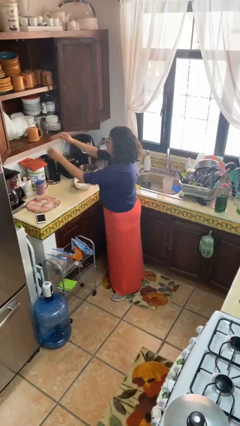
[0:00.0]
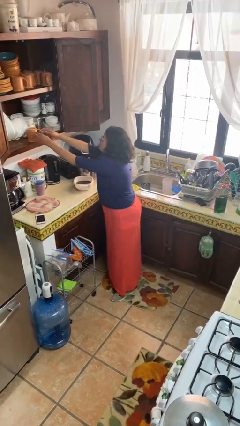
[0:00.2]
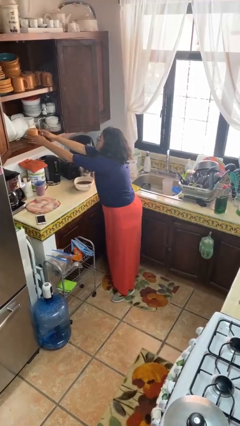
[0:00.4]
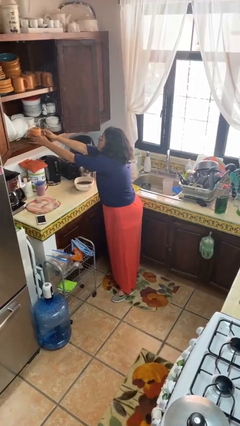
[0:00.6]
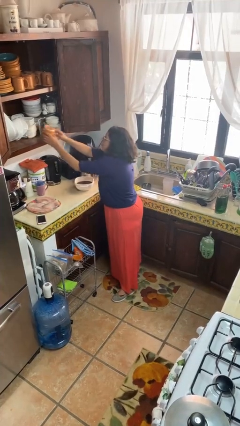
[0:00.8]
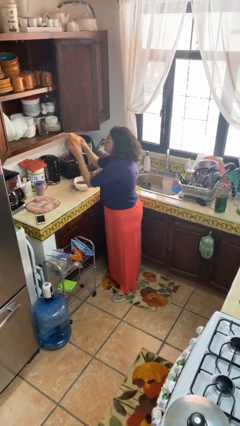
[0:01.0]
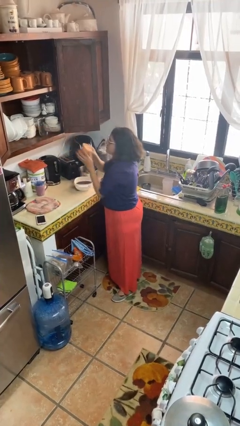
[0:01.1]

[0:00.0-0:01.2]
person picks up object from cabinet

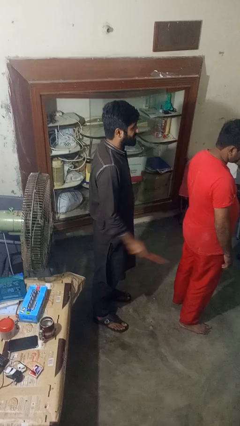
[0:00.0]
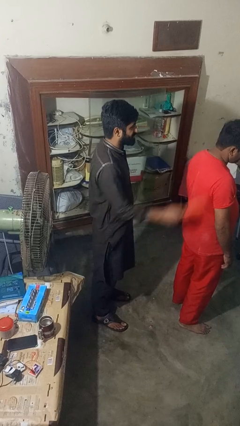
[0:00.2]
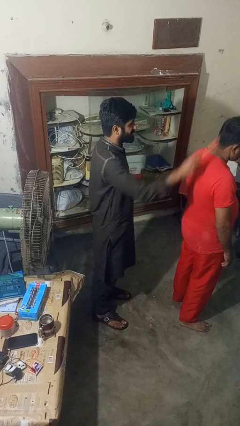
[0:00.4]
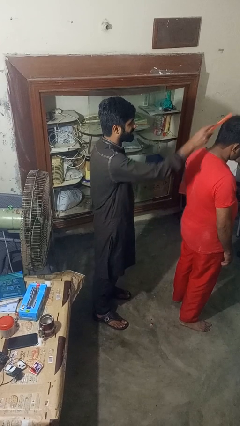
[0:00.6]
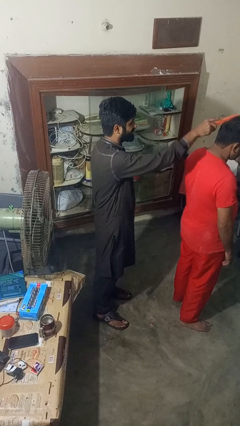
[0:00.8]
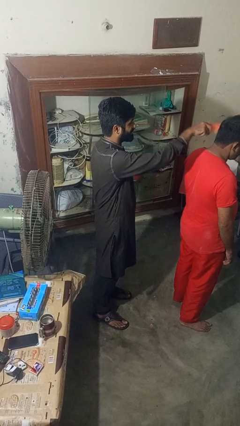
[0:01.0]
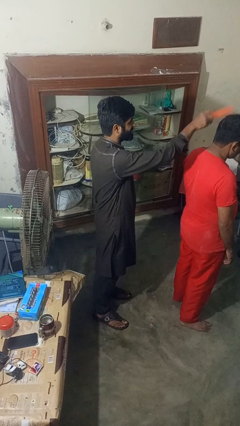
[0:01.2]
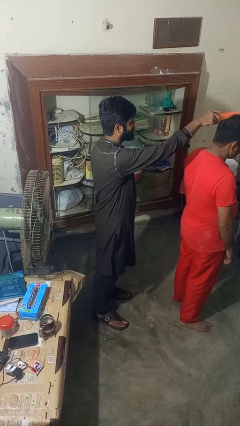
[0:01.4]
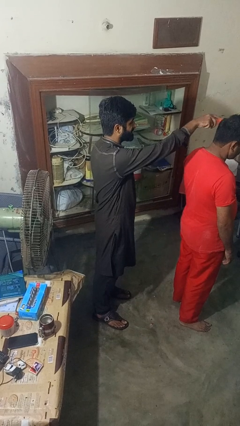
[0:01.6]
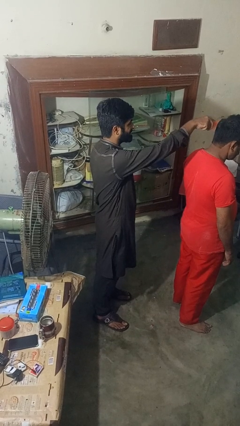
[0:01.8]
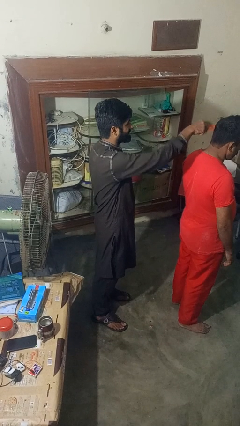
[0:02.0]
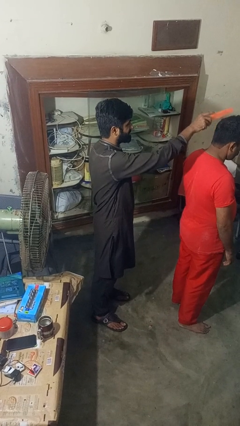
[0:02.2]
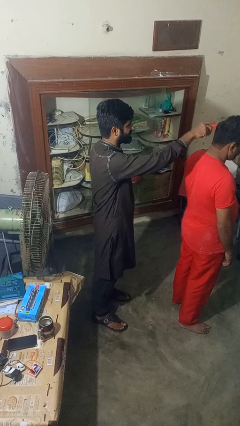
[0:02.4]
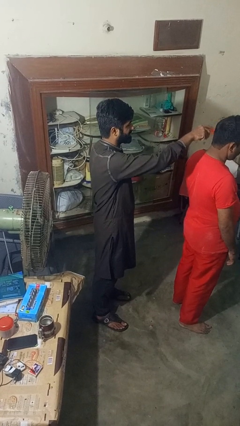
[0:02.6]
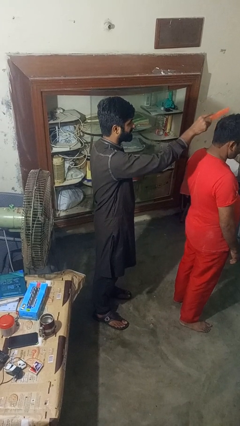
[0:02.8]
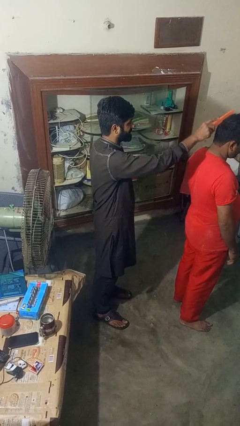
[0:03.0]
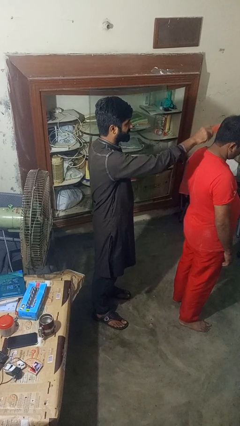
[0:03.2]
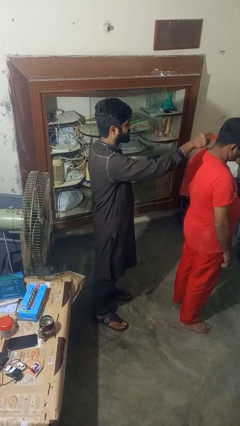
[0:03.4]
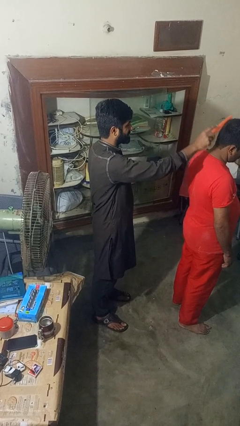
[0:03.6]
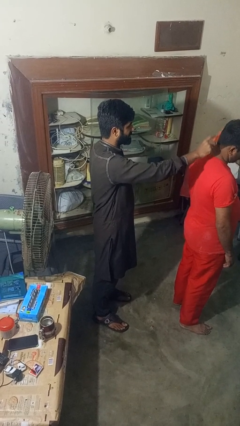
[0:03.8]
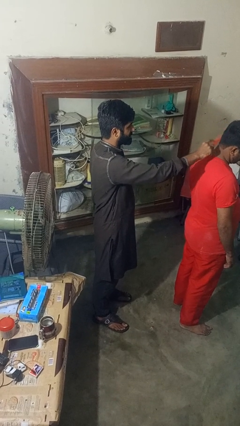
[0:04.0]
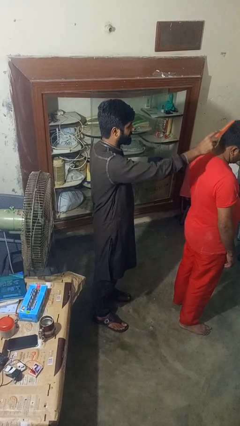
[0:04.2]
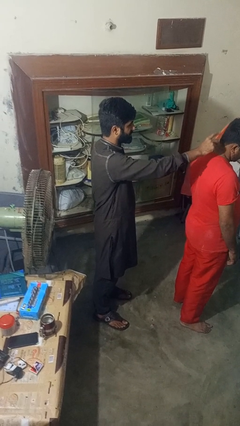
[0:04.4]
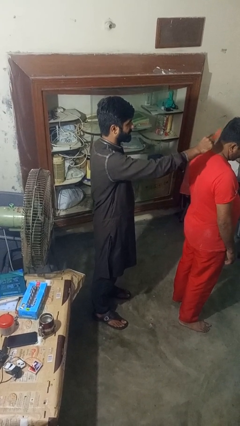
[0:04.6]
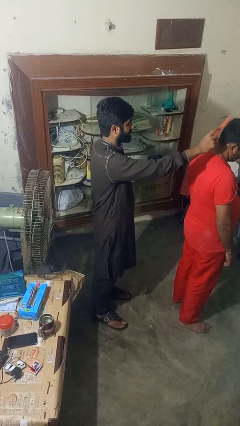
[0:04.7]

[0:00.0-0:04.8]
person brushes hair of person

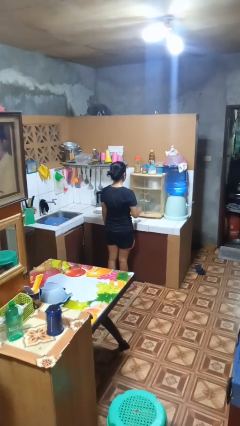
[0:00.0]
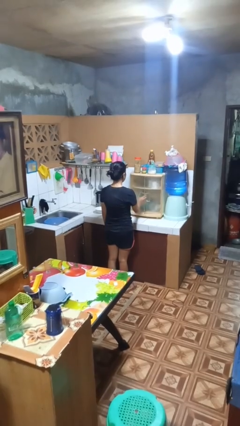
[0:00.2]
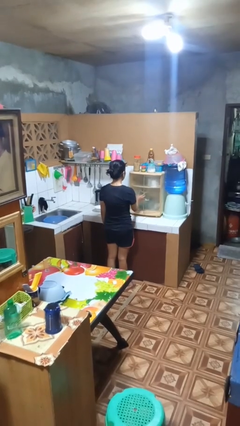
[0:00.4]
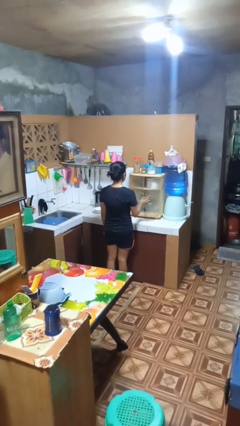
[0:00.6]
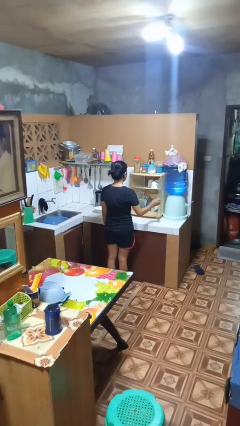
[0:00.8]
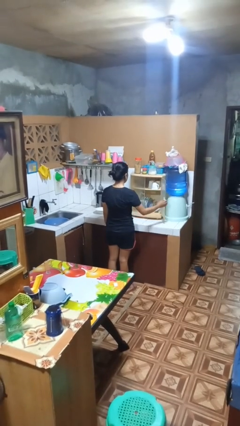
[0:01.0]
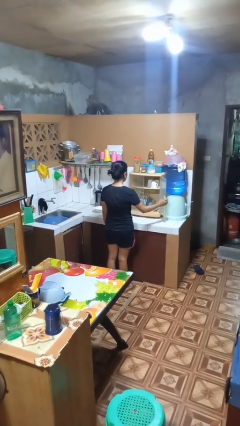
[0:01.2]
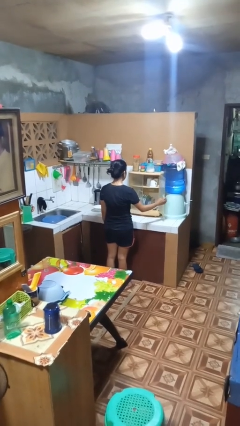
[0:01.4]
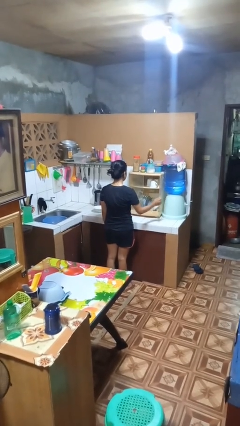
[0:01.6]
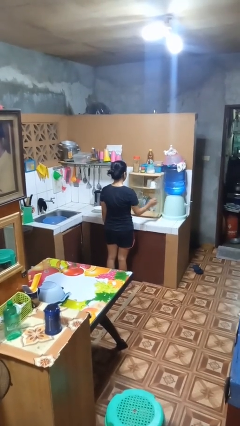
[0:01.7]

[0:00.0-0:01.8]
person opens kitchen drawer

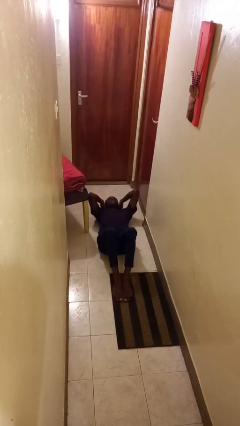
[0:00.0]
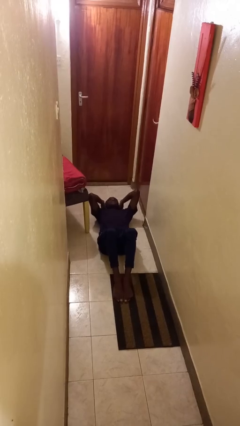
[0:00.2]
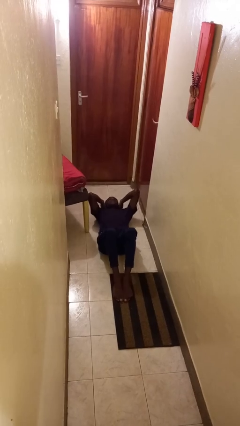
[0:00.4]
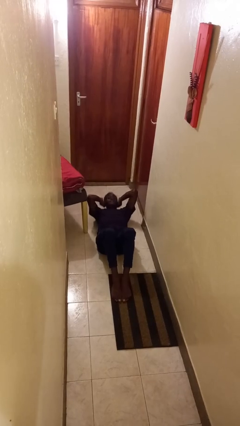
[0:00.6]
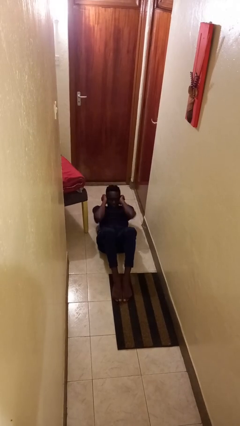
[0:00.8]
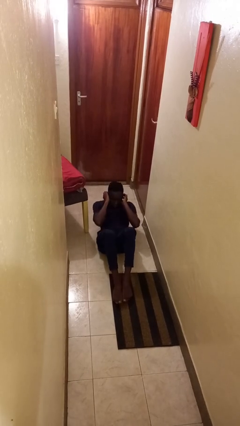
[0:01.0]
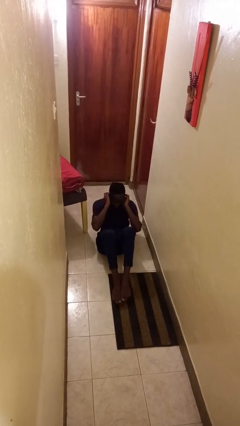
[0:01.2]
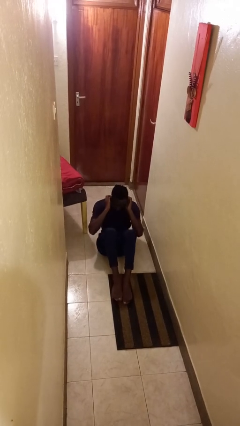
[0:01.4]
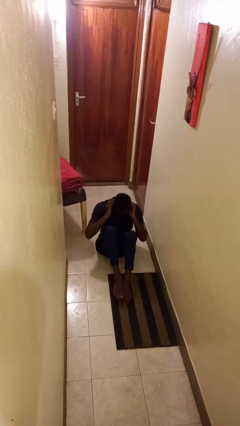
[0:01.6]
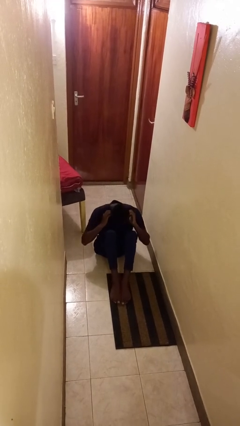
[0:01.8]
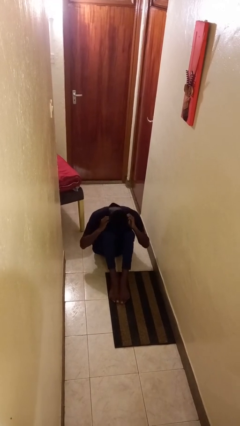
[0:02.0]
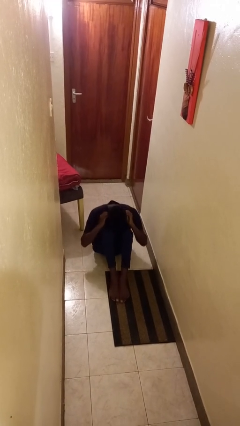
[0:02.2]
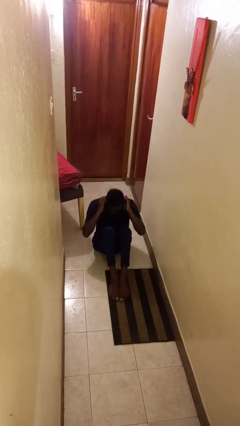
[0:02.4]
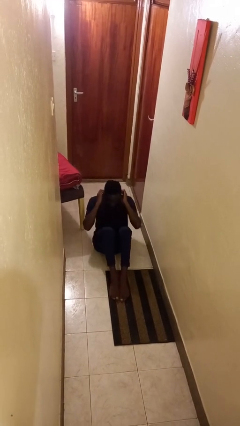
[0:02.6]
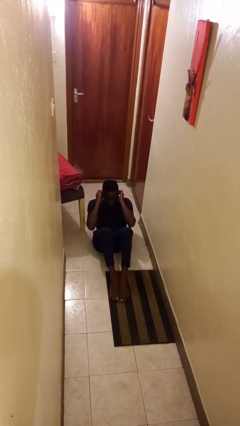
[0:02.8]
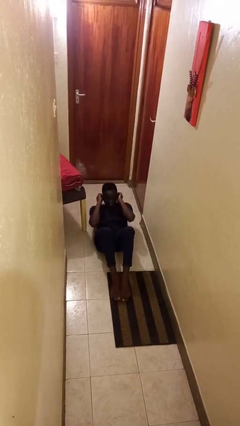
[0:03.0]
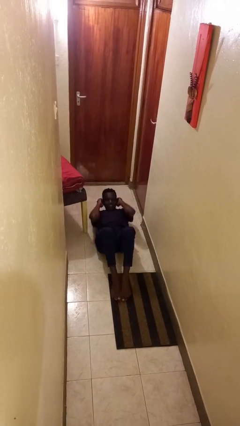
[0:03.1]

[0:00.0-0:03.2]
person exercises with situp

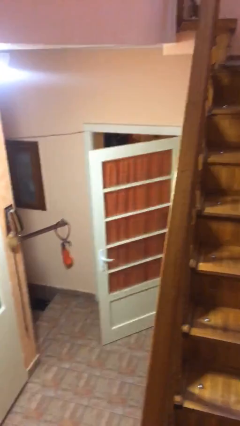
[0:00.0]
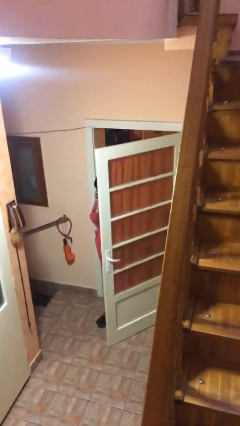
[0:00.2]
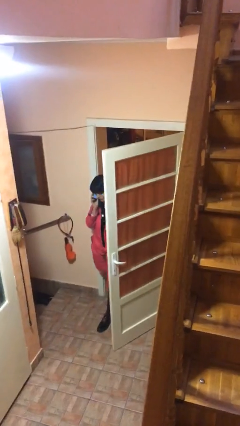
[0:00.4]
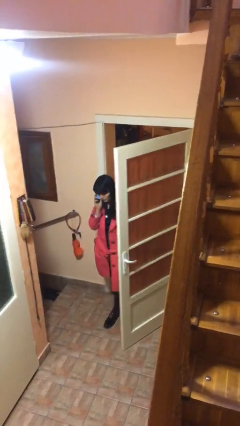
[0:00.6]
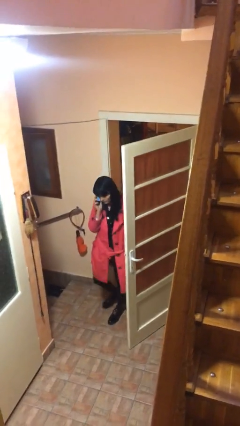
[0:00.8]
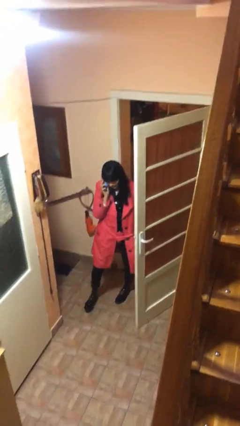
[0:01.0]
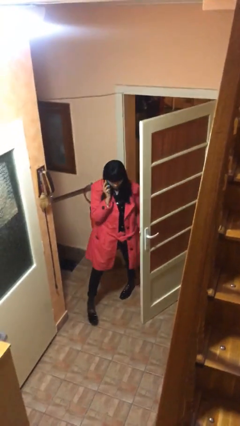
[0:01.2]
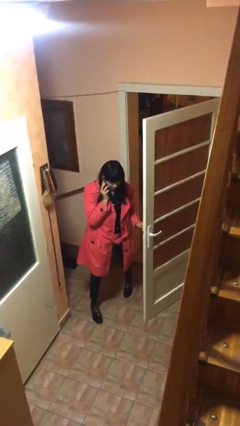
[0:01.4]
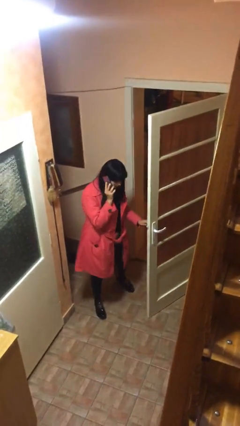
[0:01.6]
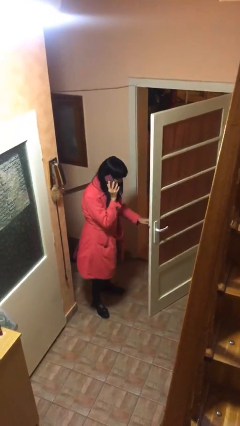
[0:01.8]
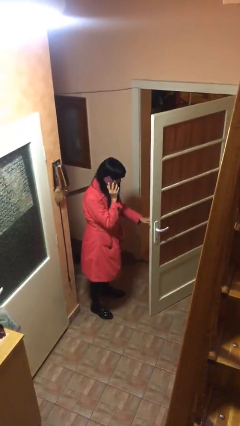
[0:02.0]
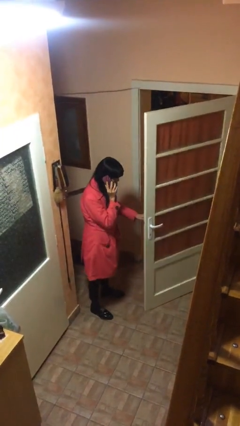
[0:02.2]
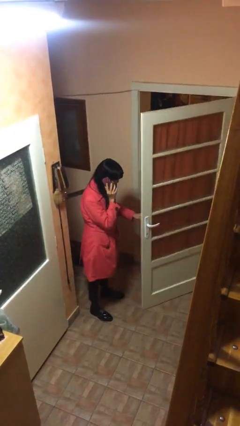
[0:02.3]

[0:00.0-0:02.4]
person enters scene through structure

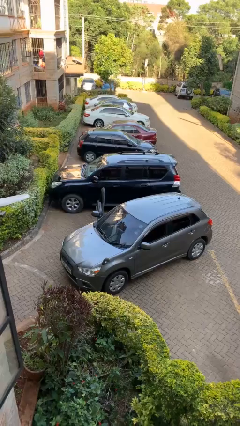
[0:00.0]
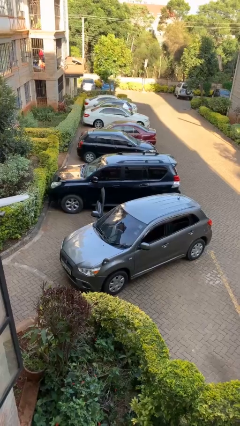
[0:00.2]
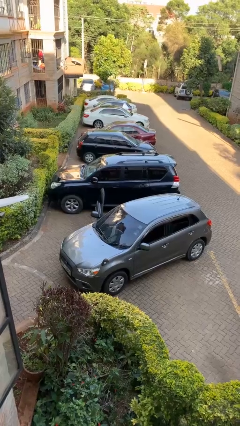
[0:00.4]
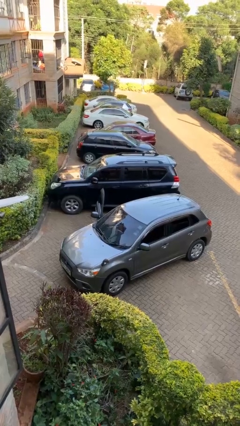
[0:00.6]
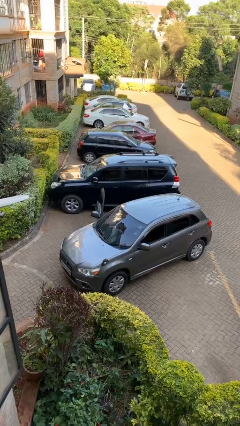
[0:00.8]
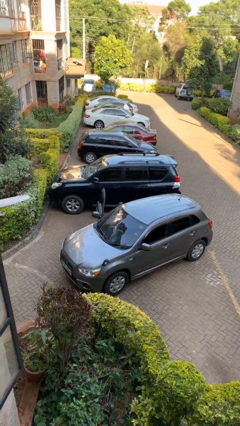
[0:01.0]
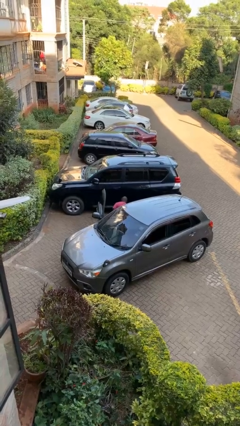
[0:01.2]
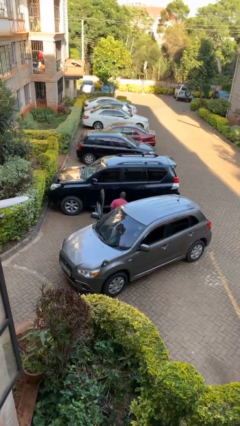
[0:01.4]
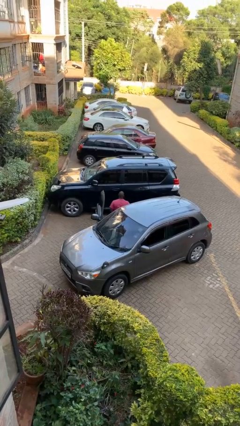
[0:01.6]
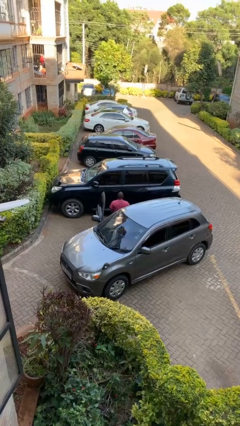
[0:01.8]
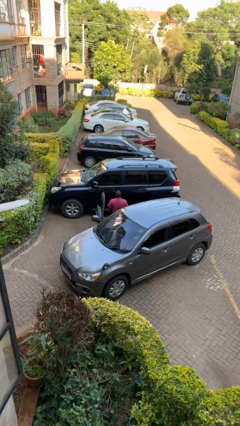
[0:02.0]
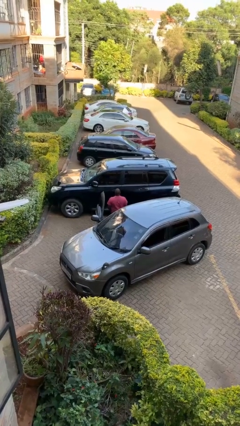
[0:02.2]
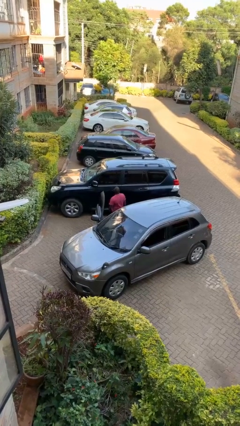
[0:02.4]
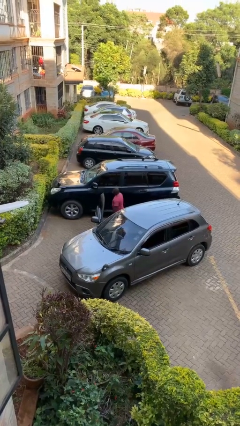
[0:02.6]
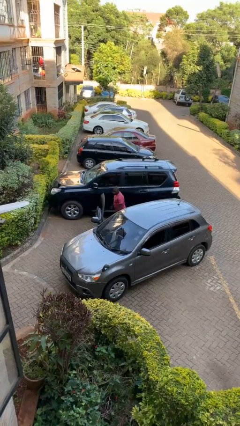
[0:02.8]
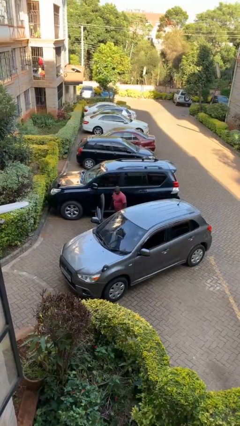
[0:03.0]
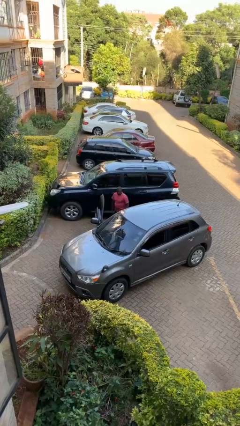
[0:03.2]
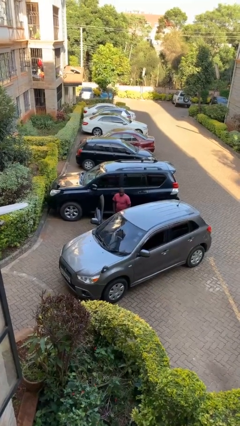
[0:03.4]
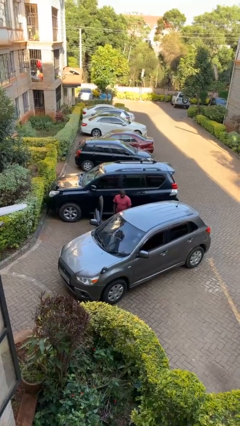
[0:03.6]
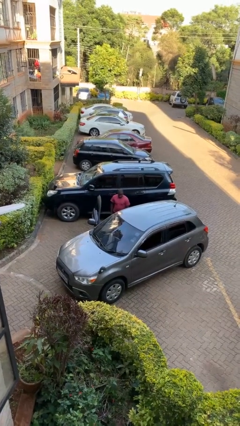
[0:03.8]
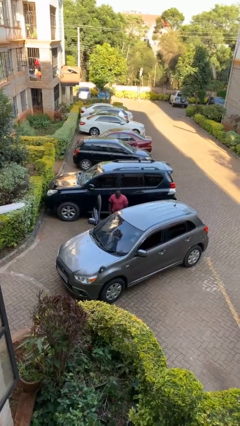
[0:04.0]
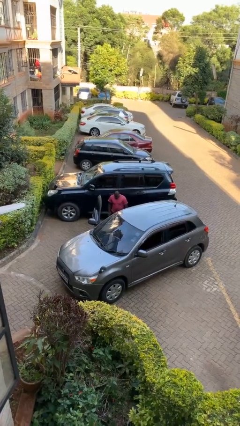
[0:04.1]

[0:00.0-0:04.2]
person exits car
